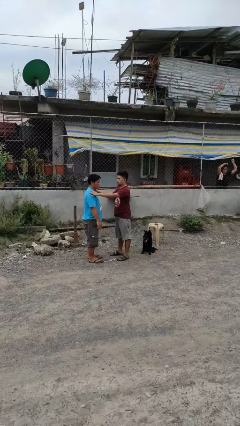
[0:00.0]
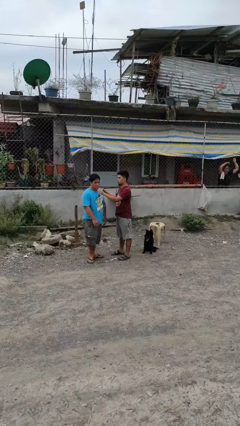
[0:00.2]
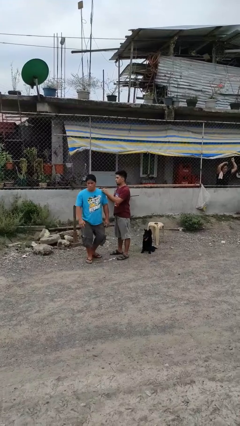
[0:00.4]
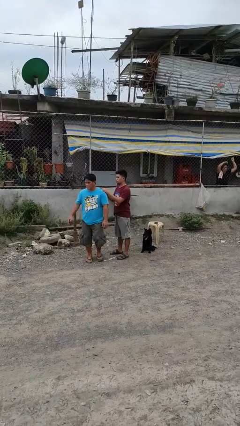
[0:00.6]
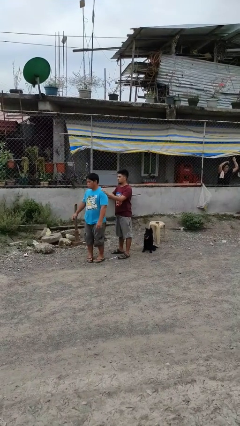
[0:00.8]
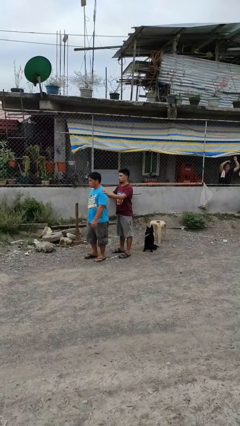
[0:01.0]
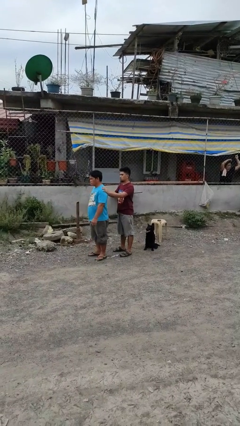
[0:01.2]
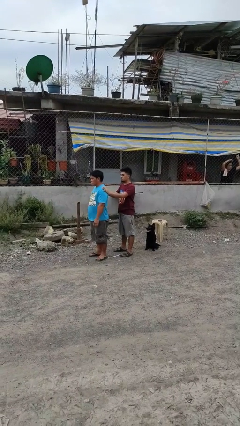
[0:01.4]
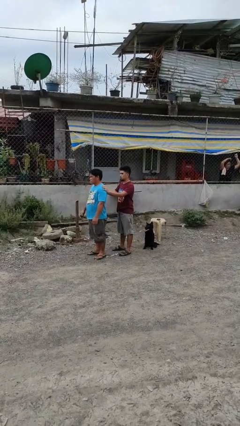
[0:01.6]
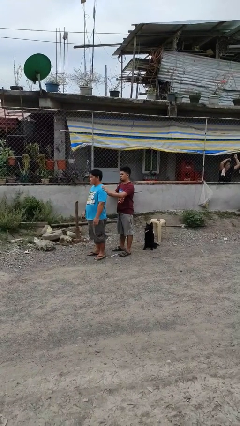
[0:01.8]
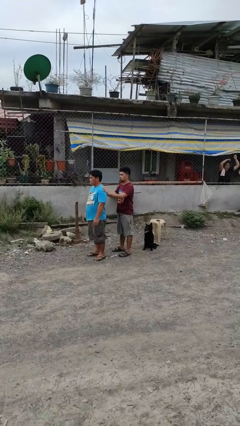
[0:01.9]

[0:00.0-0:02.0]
person spins person around

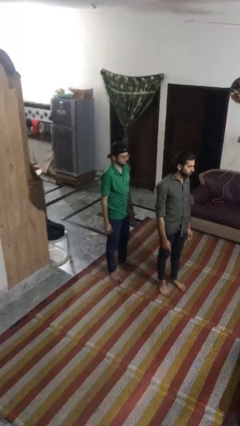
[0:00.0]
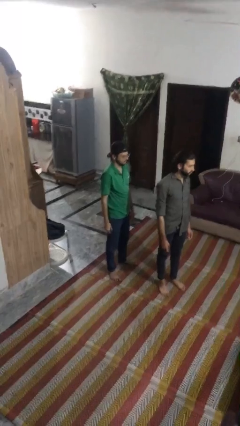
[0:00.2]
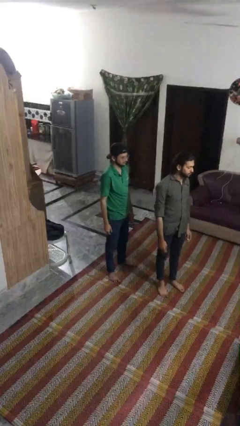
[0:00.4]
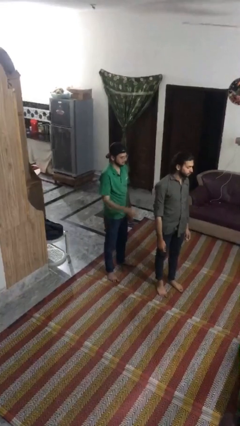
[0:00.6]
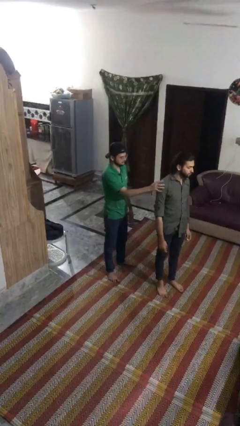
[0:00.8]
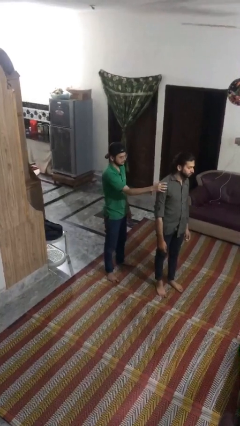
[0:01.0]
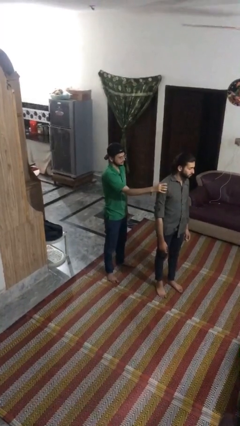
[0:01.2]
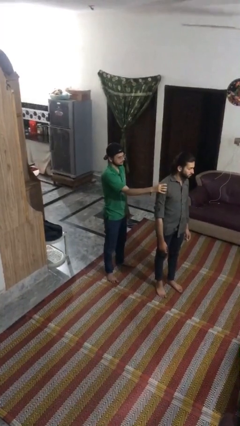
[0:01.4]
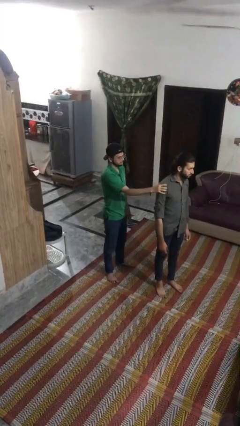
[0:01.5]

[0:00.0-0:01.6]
person grabs person by shoulder

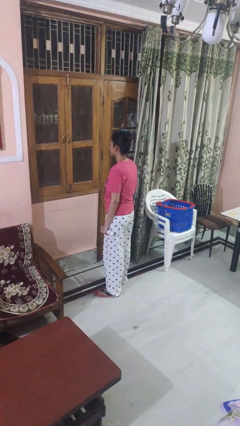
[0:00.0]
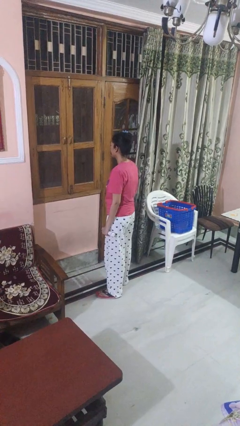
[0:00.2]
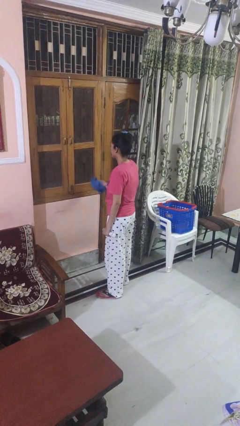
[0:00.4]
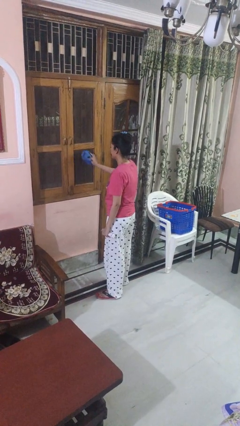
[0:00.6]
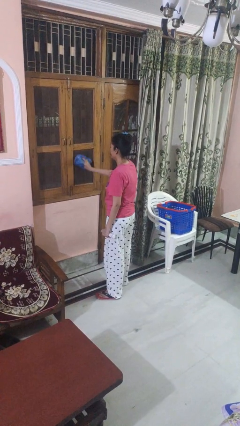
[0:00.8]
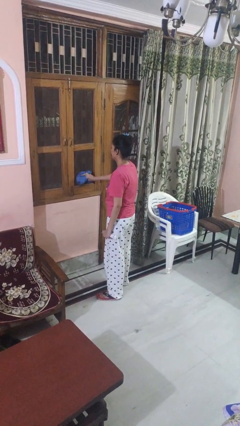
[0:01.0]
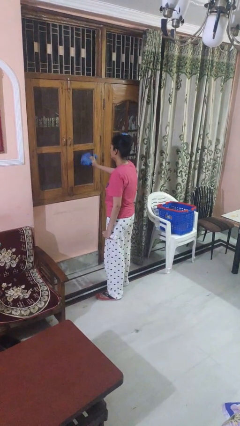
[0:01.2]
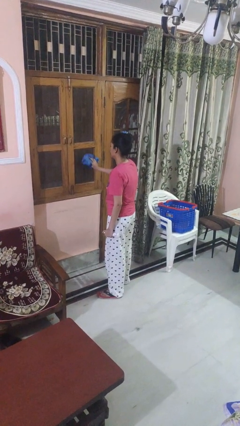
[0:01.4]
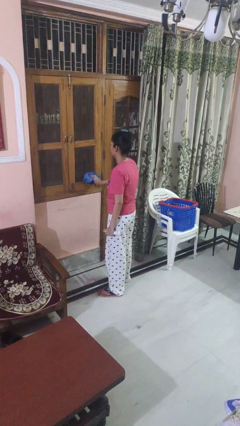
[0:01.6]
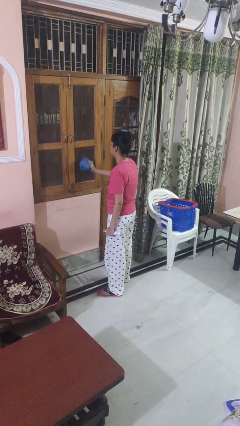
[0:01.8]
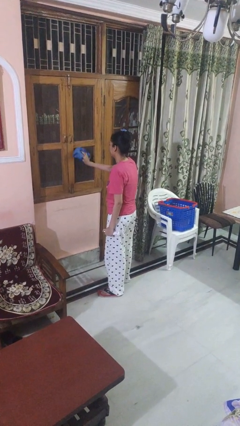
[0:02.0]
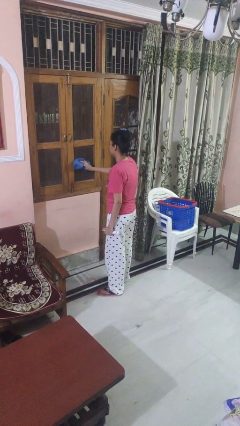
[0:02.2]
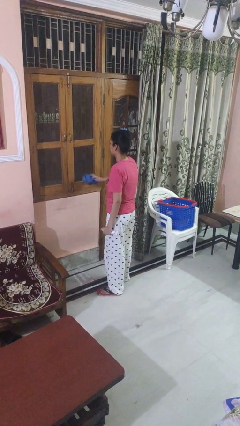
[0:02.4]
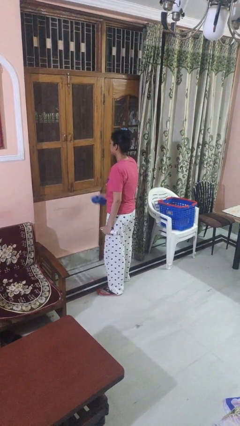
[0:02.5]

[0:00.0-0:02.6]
person washes window

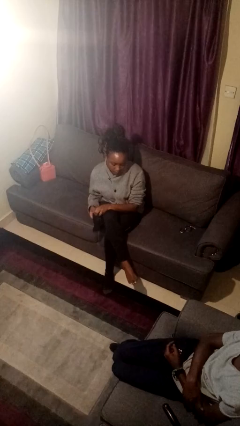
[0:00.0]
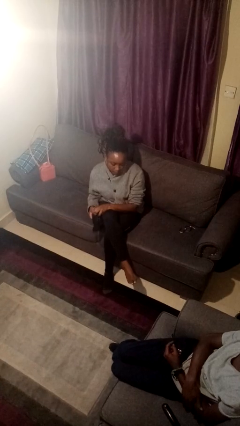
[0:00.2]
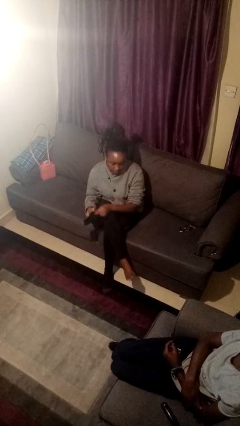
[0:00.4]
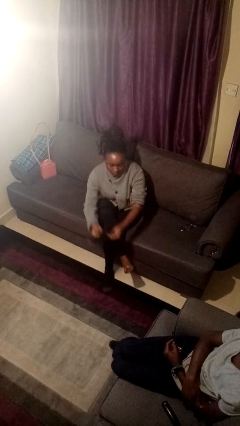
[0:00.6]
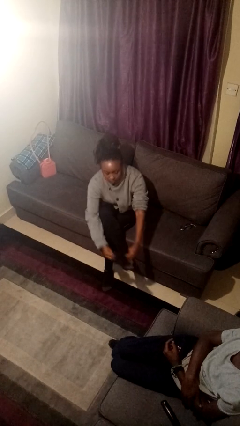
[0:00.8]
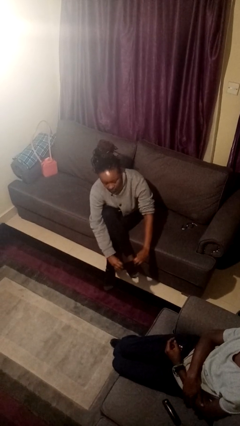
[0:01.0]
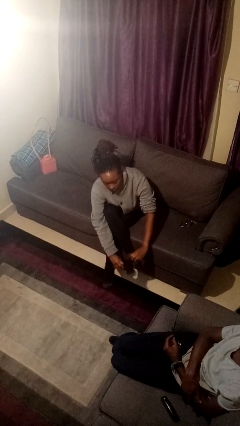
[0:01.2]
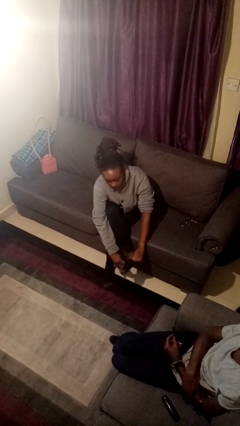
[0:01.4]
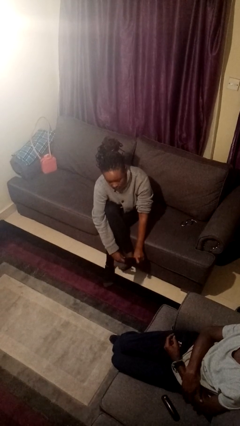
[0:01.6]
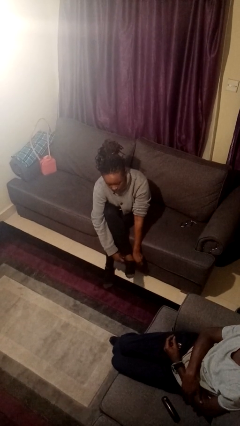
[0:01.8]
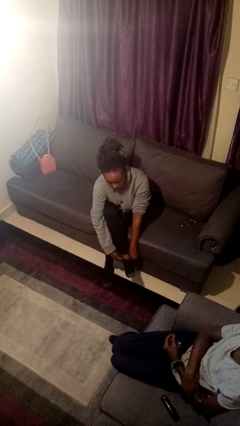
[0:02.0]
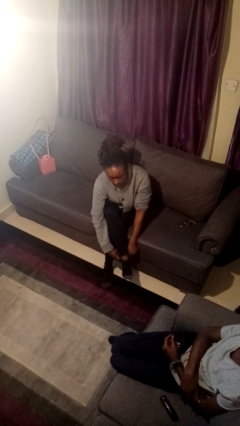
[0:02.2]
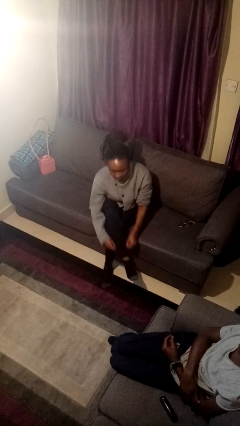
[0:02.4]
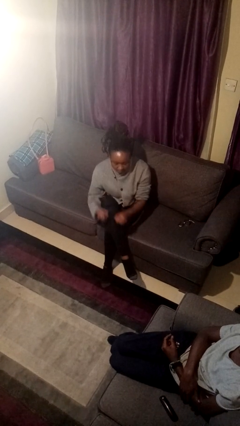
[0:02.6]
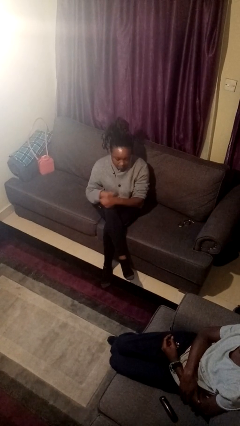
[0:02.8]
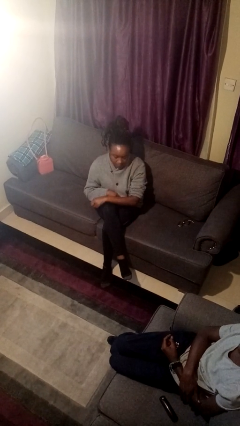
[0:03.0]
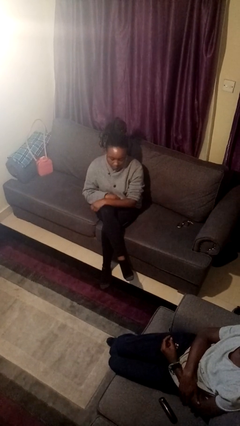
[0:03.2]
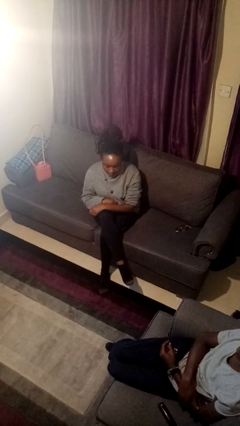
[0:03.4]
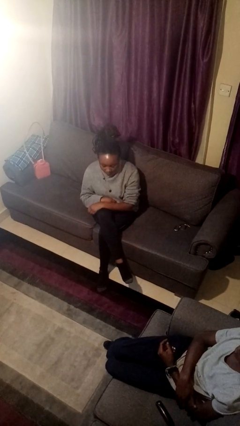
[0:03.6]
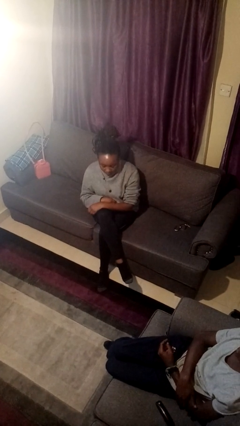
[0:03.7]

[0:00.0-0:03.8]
person puts on socks

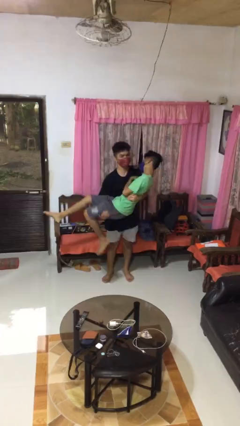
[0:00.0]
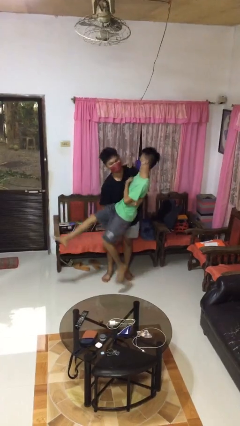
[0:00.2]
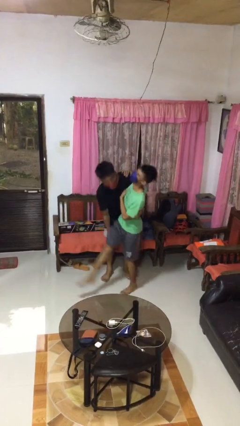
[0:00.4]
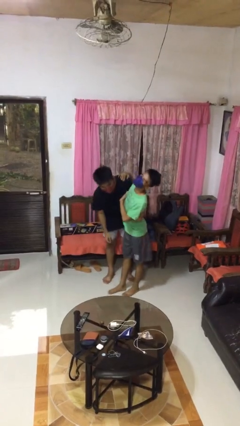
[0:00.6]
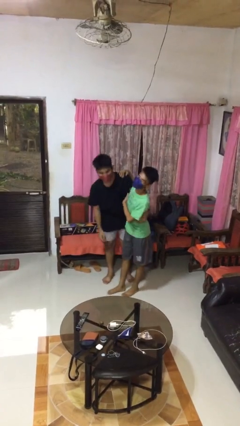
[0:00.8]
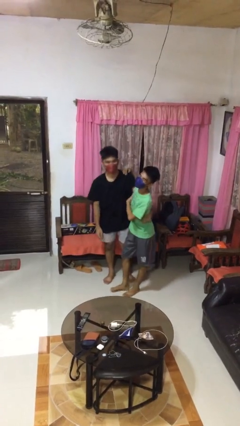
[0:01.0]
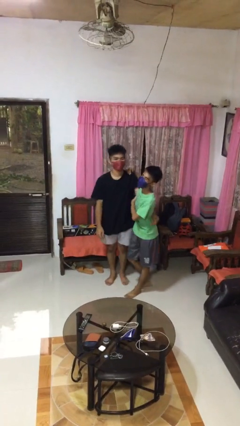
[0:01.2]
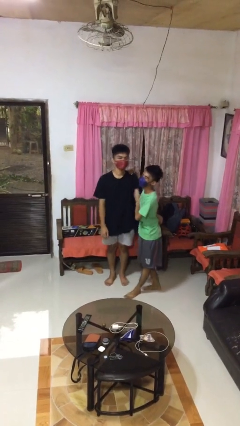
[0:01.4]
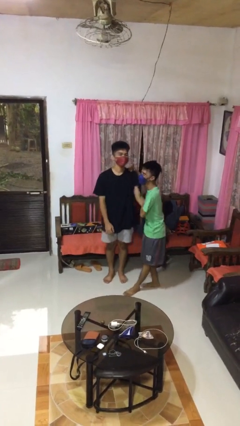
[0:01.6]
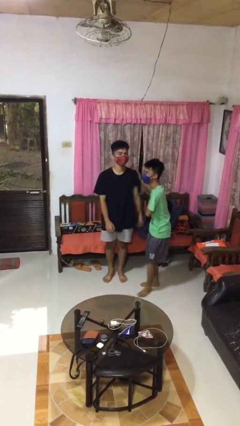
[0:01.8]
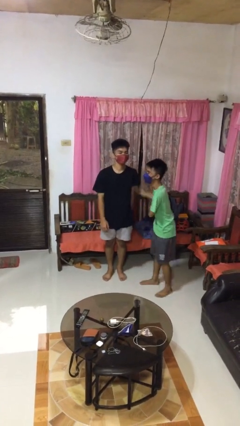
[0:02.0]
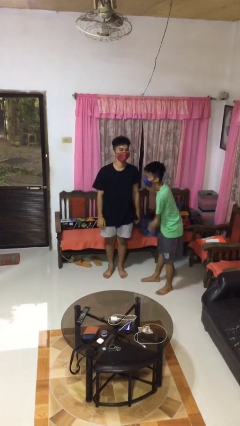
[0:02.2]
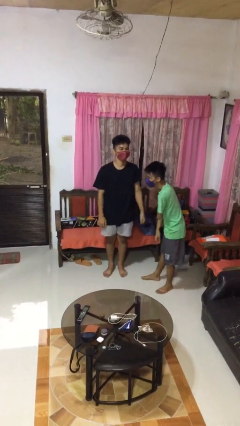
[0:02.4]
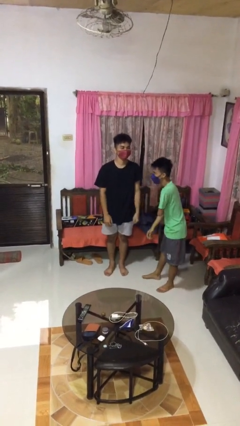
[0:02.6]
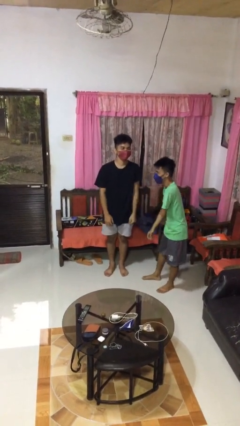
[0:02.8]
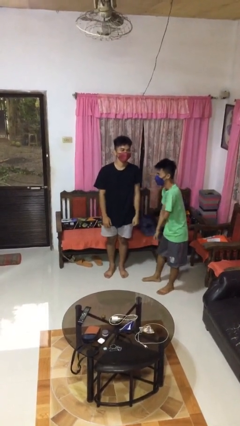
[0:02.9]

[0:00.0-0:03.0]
person puts down person

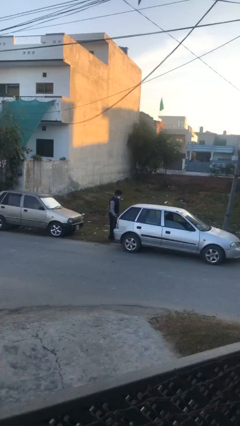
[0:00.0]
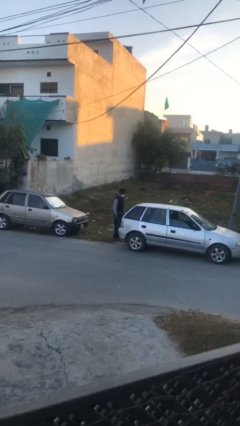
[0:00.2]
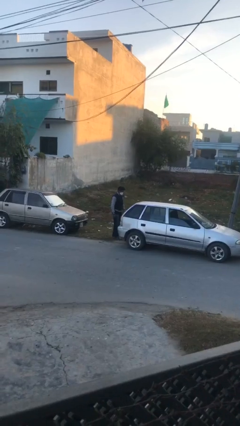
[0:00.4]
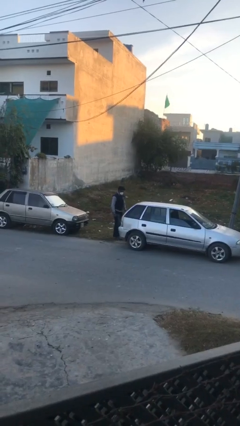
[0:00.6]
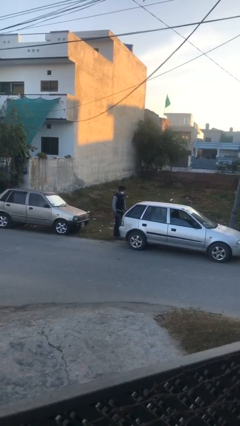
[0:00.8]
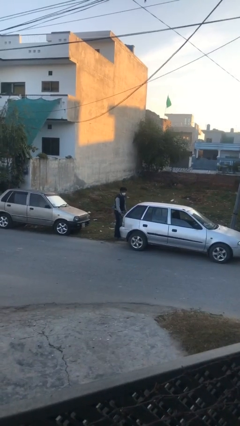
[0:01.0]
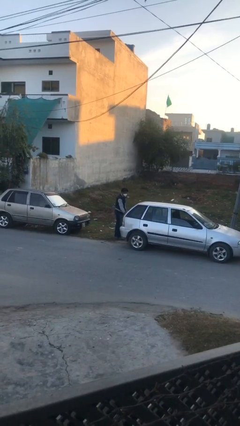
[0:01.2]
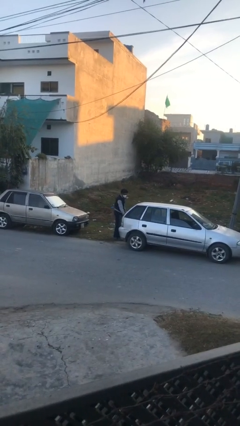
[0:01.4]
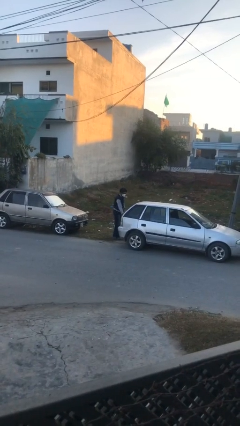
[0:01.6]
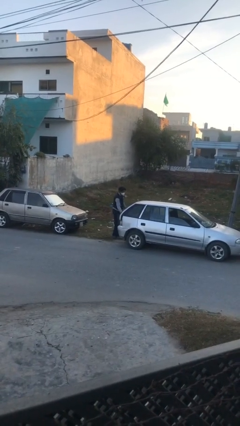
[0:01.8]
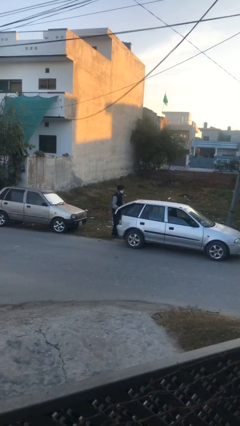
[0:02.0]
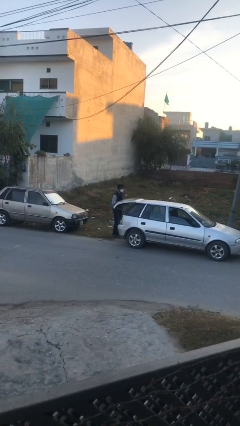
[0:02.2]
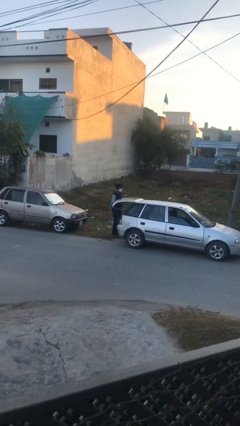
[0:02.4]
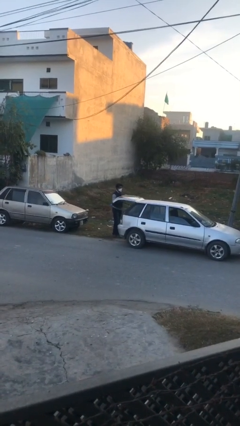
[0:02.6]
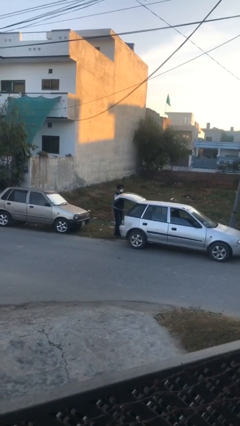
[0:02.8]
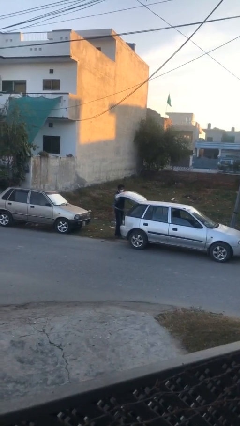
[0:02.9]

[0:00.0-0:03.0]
person opens car trunk

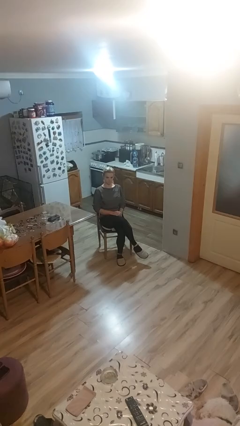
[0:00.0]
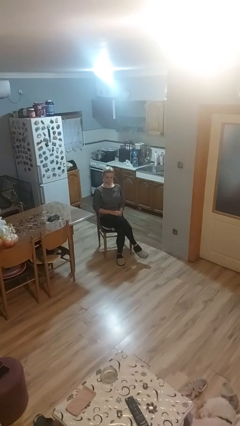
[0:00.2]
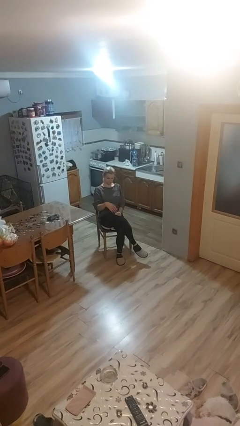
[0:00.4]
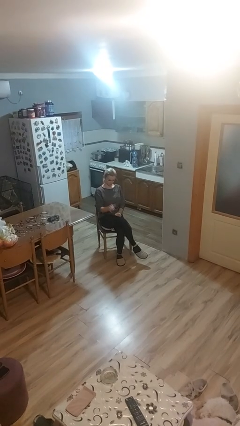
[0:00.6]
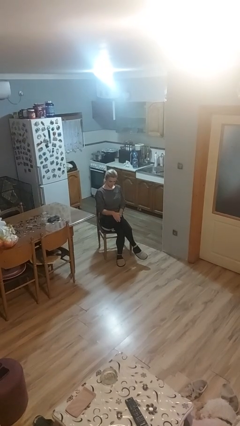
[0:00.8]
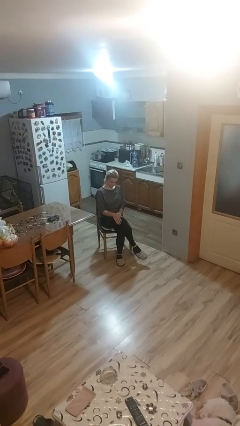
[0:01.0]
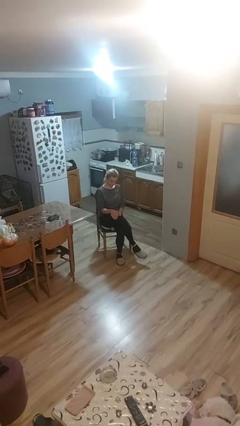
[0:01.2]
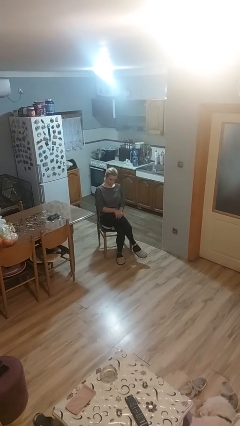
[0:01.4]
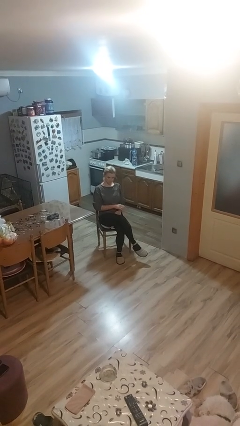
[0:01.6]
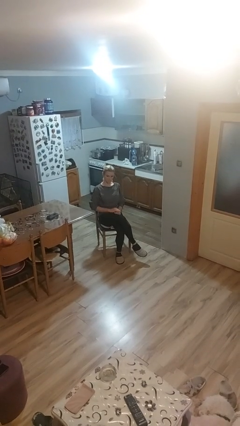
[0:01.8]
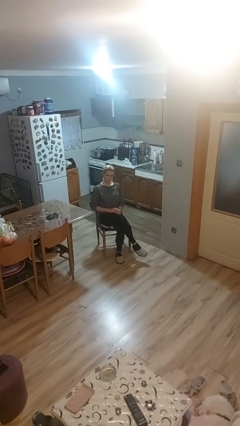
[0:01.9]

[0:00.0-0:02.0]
person slaps hands on thighs
